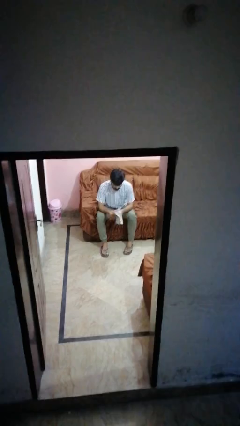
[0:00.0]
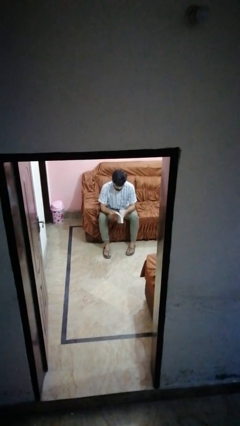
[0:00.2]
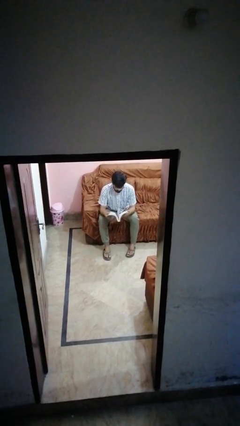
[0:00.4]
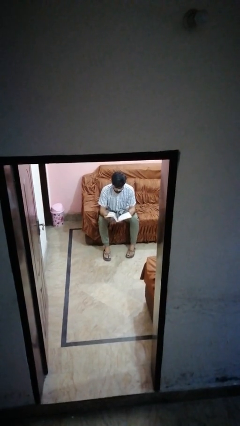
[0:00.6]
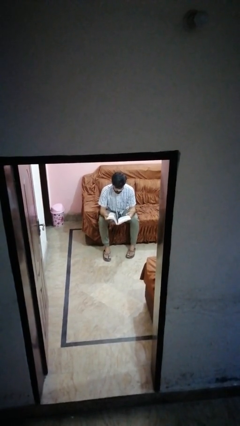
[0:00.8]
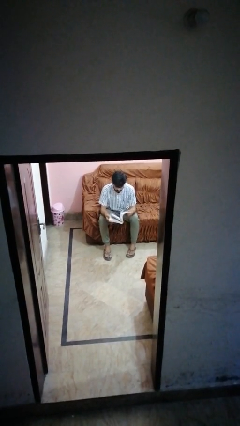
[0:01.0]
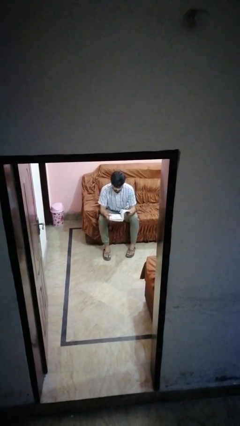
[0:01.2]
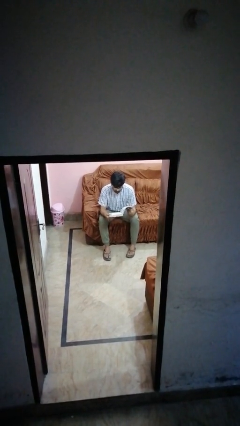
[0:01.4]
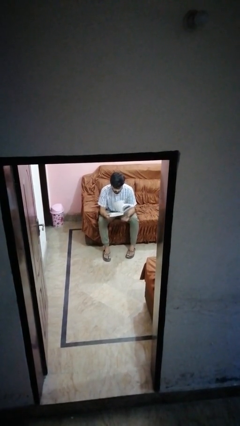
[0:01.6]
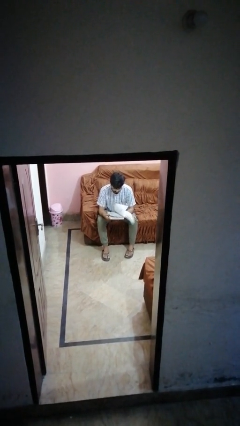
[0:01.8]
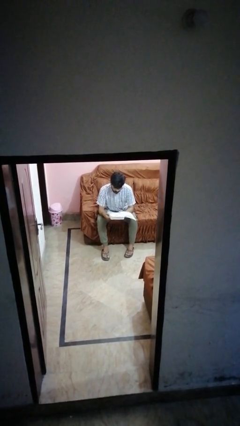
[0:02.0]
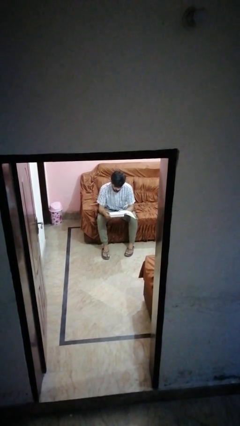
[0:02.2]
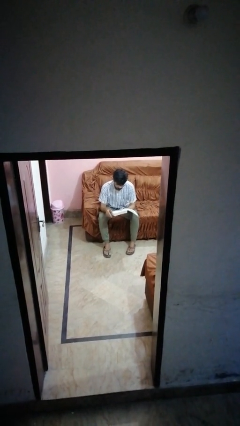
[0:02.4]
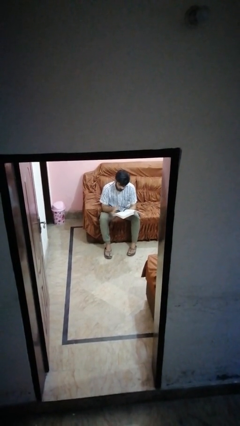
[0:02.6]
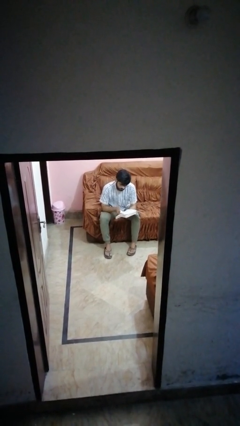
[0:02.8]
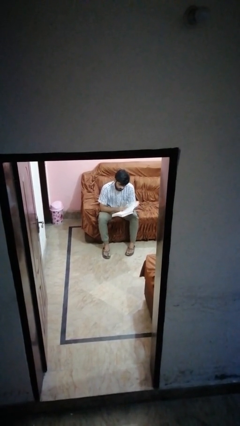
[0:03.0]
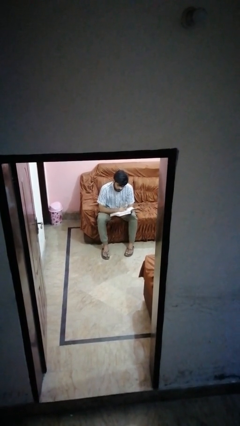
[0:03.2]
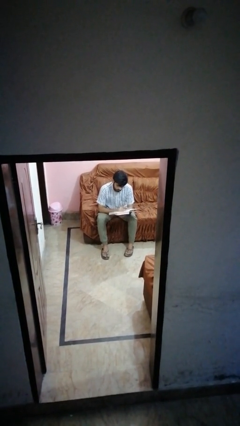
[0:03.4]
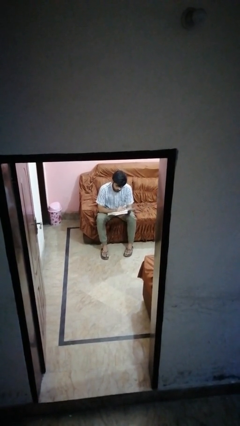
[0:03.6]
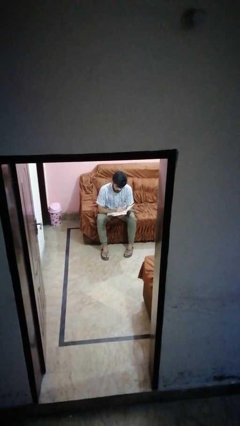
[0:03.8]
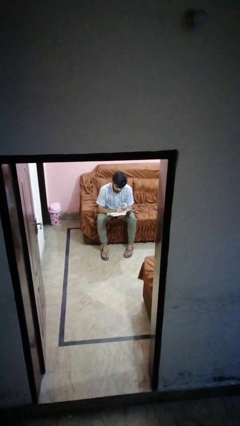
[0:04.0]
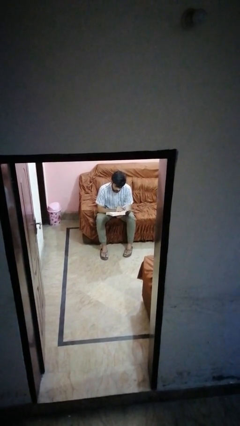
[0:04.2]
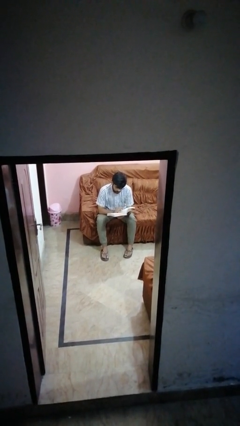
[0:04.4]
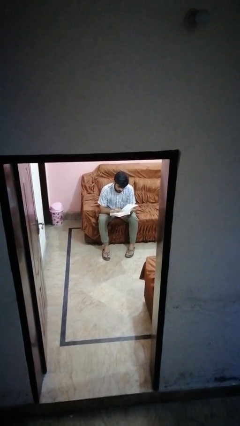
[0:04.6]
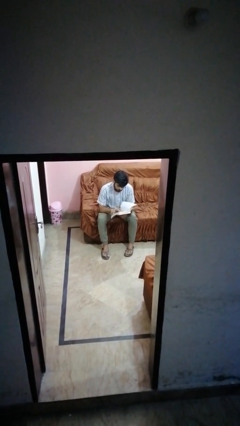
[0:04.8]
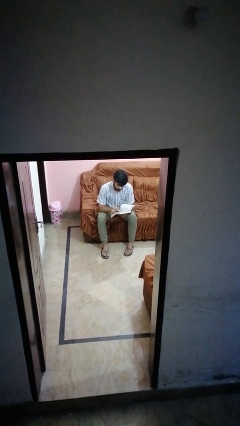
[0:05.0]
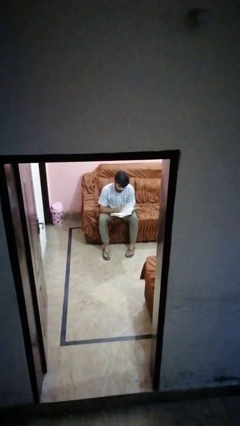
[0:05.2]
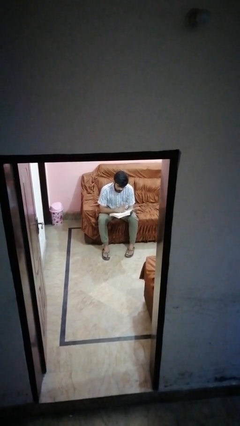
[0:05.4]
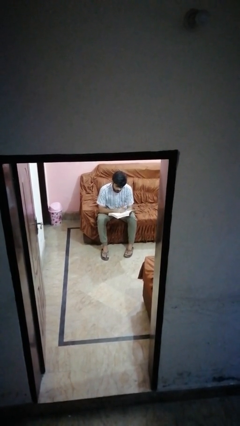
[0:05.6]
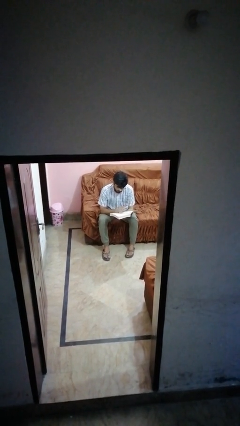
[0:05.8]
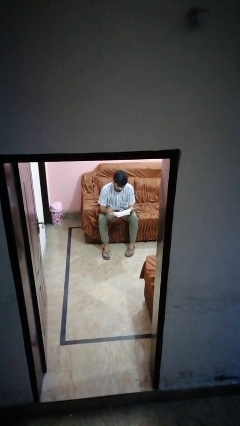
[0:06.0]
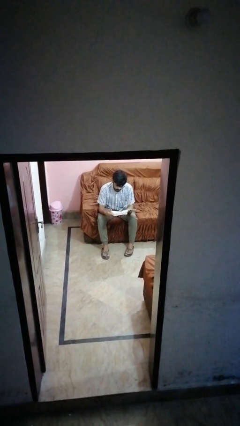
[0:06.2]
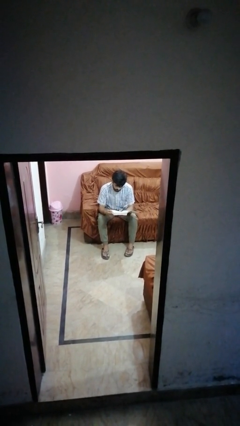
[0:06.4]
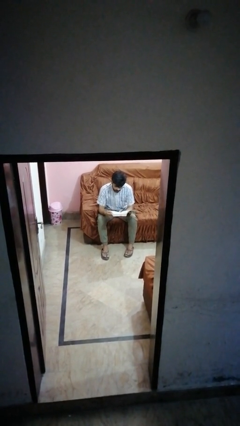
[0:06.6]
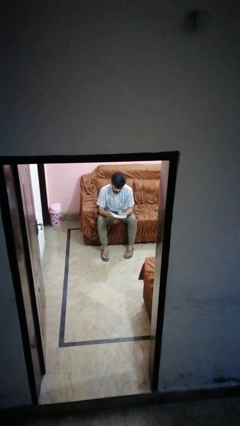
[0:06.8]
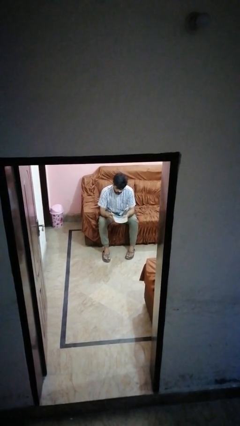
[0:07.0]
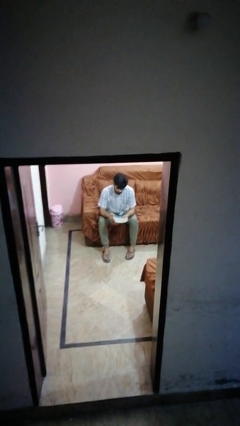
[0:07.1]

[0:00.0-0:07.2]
person reads book

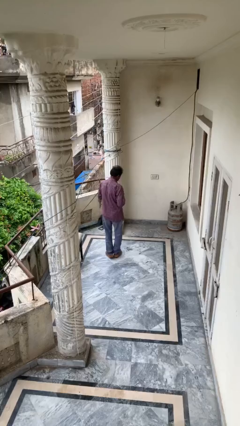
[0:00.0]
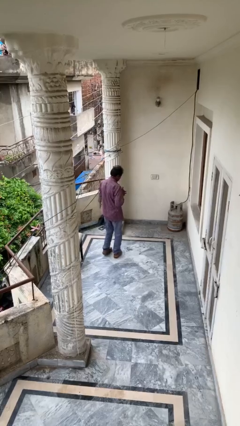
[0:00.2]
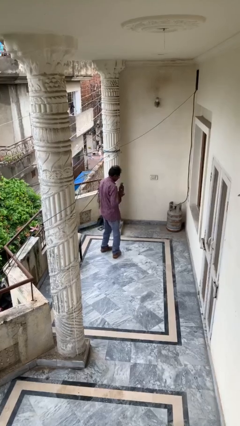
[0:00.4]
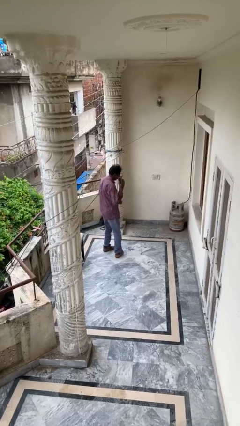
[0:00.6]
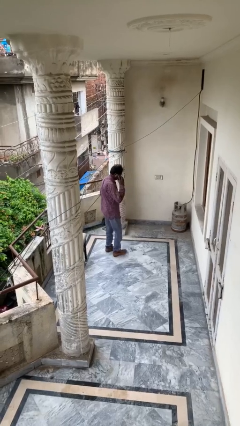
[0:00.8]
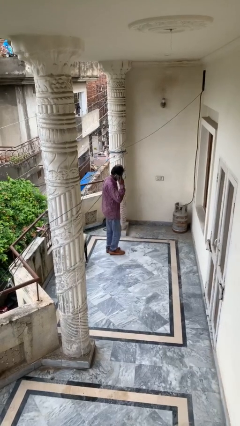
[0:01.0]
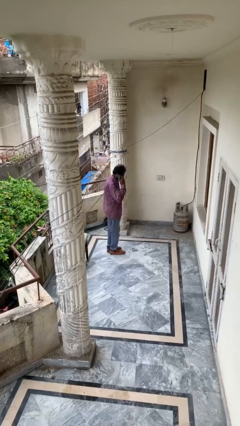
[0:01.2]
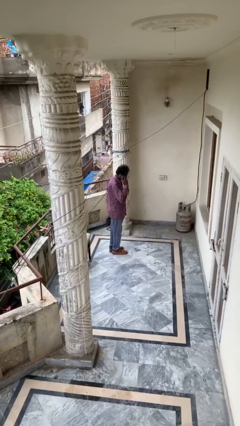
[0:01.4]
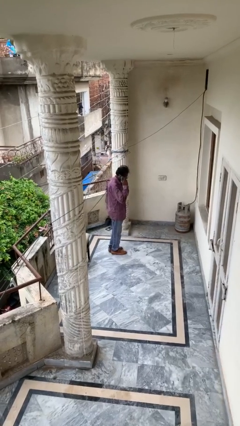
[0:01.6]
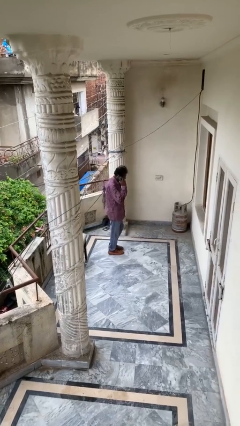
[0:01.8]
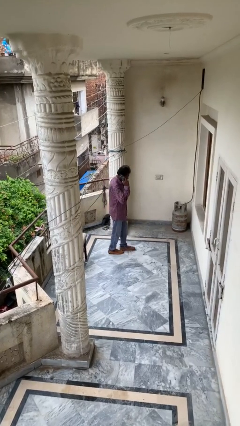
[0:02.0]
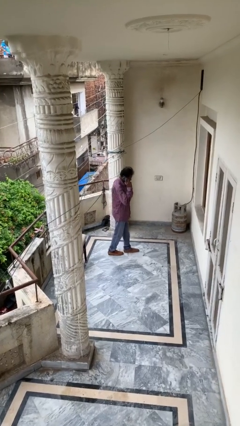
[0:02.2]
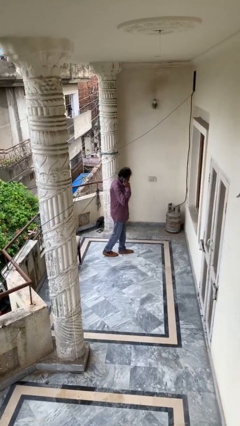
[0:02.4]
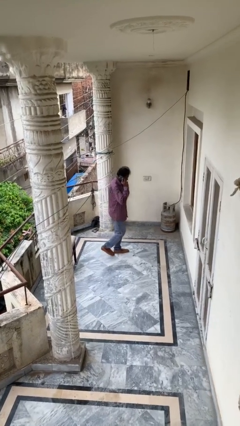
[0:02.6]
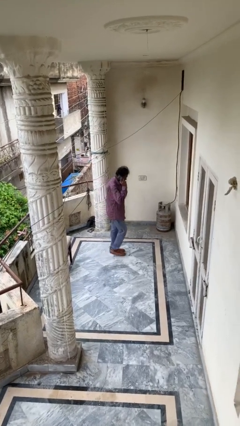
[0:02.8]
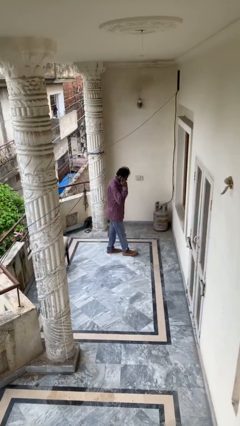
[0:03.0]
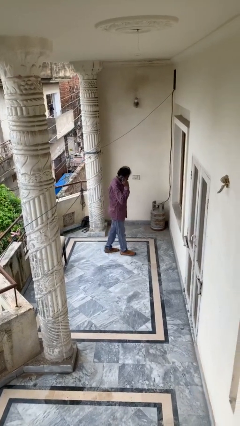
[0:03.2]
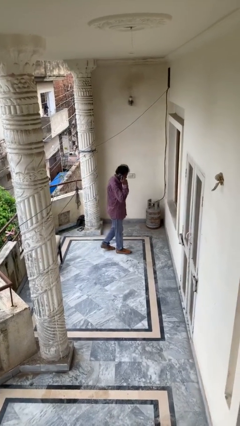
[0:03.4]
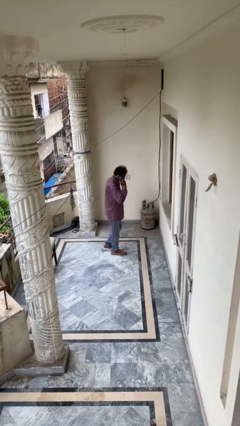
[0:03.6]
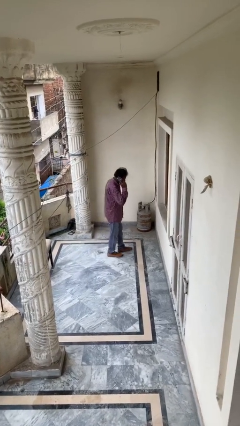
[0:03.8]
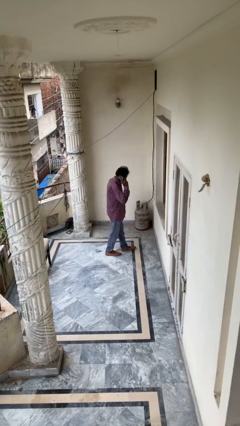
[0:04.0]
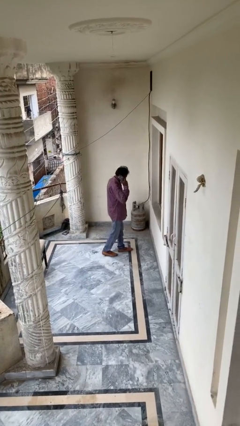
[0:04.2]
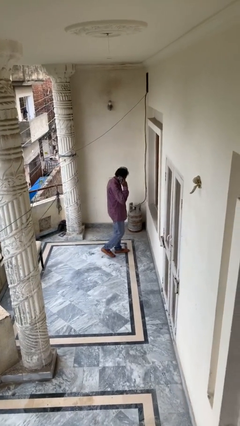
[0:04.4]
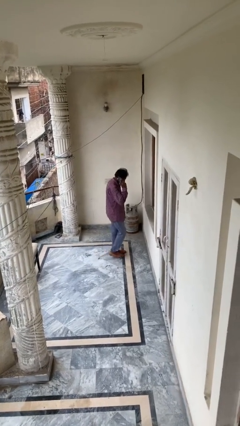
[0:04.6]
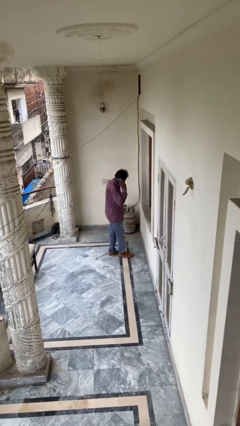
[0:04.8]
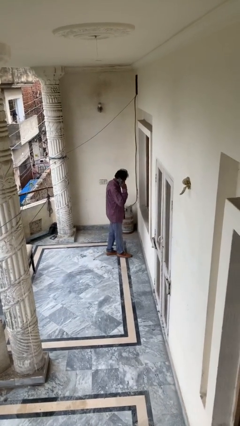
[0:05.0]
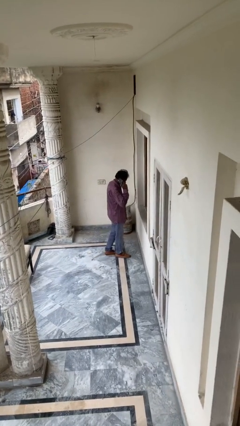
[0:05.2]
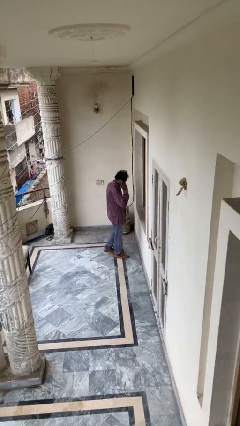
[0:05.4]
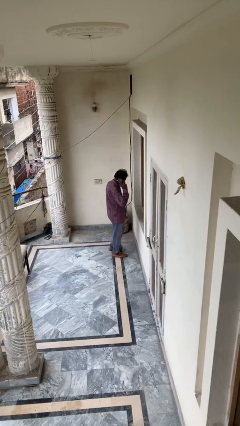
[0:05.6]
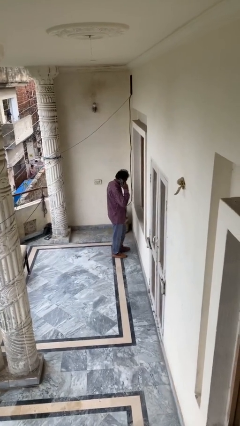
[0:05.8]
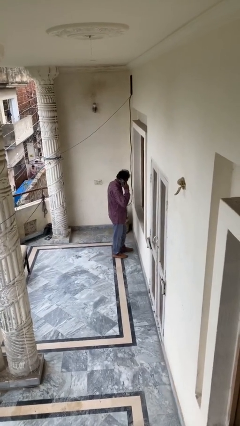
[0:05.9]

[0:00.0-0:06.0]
person talks on phone

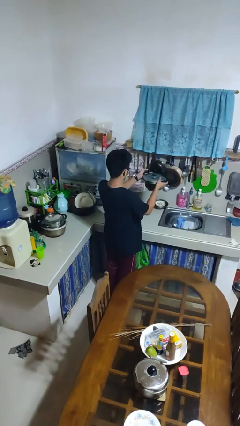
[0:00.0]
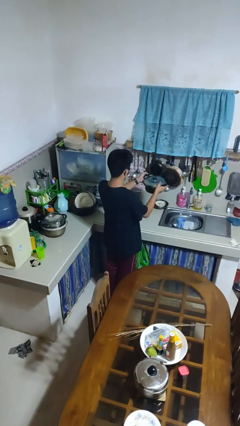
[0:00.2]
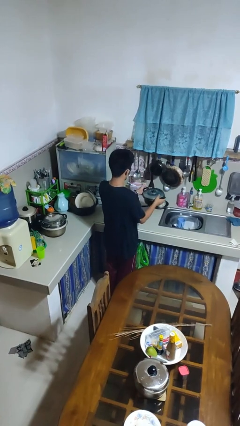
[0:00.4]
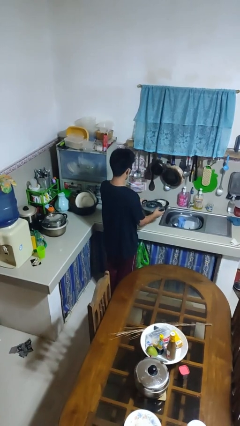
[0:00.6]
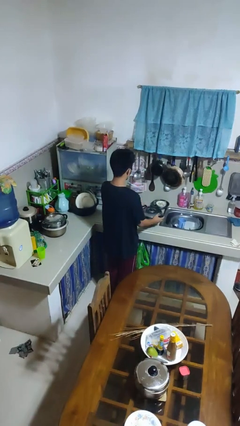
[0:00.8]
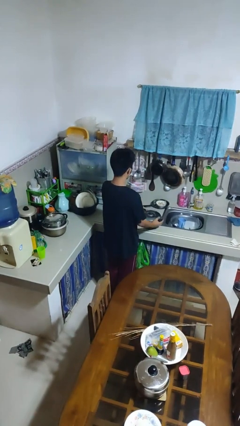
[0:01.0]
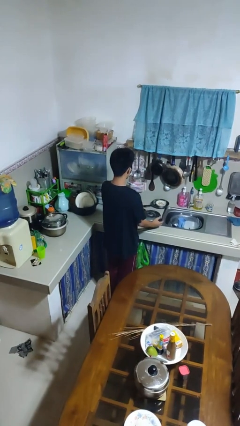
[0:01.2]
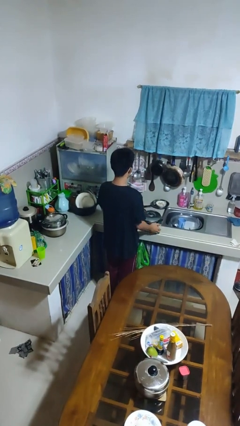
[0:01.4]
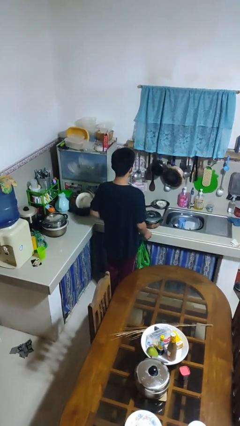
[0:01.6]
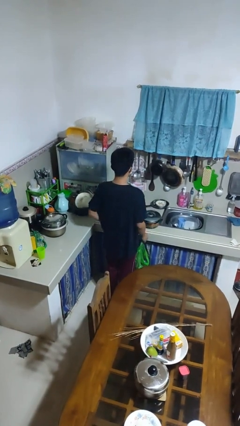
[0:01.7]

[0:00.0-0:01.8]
person puts down object on countertop

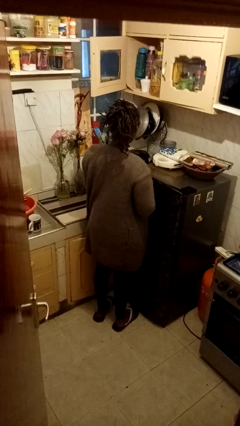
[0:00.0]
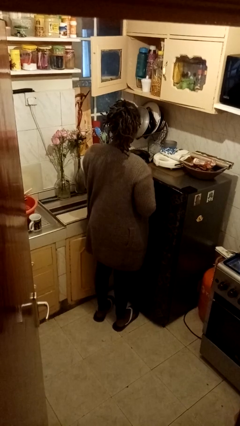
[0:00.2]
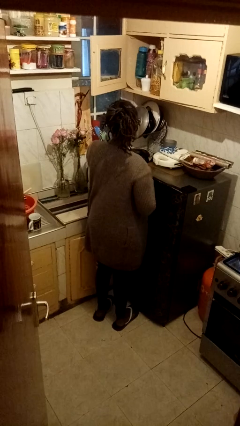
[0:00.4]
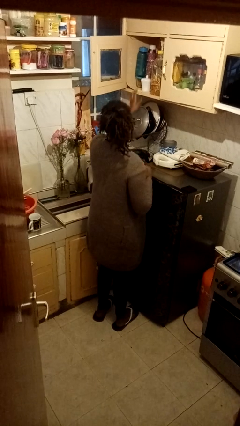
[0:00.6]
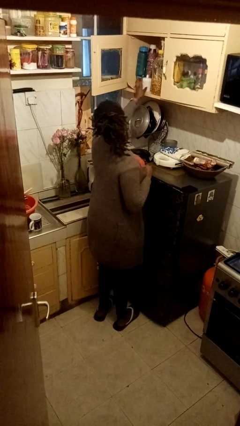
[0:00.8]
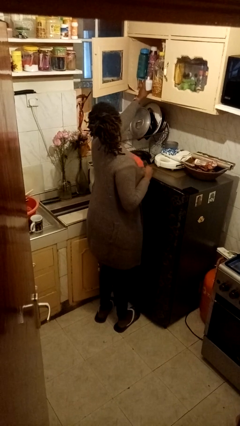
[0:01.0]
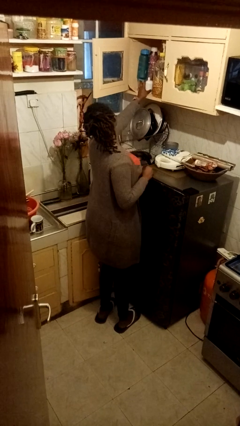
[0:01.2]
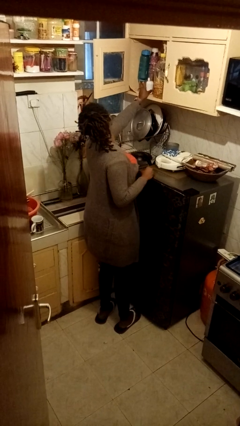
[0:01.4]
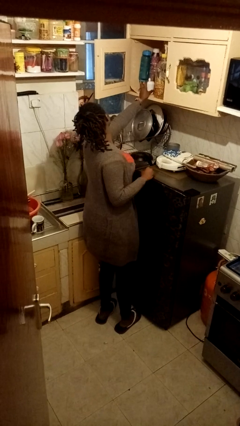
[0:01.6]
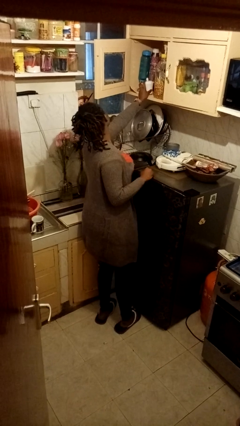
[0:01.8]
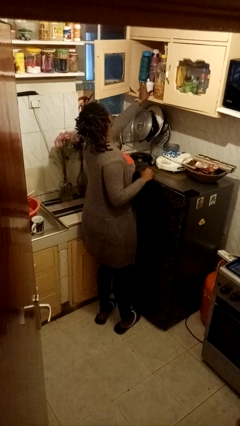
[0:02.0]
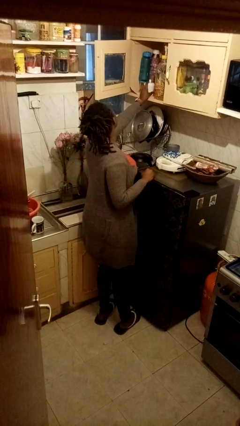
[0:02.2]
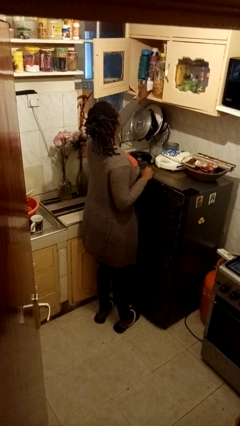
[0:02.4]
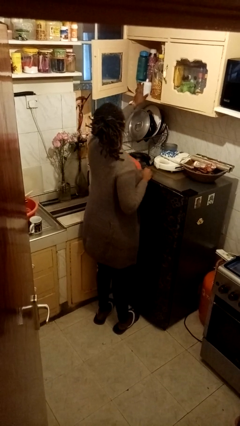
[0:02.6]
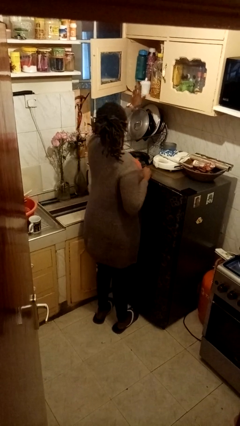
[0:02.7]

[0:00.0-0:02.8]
person searches in cabinet
